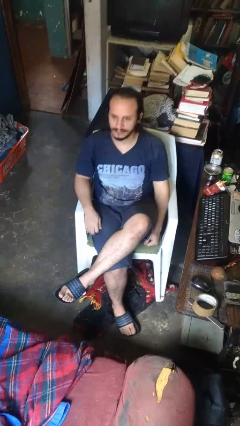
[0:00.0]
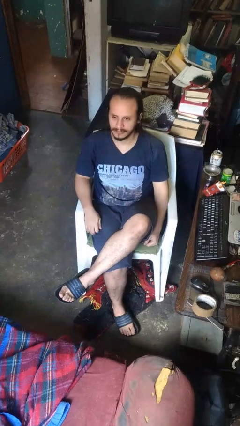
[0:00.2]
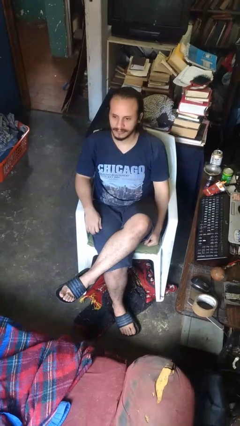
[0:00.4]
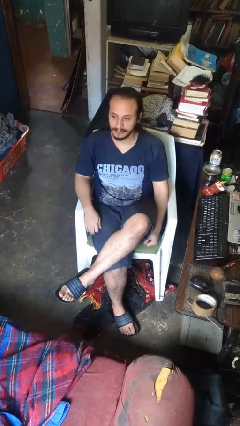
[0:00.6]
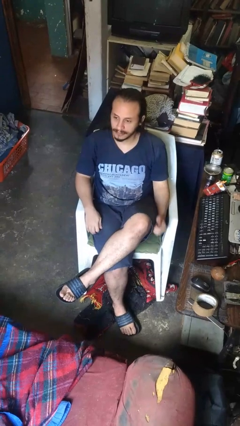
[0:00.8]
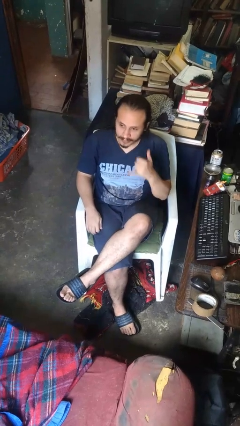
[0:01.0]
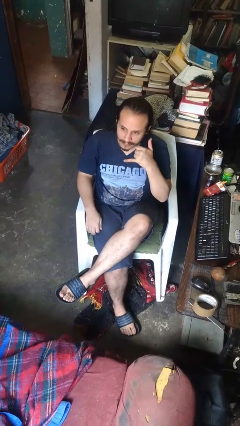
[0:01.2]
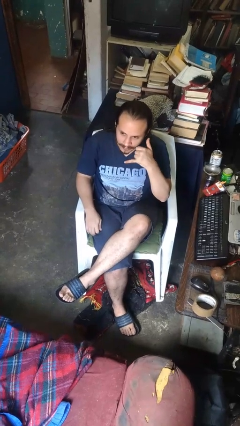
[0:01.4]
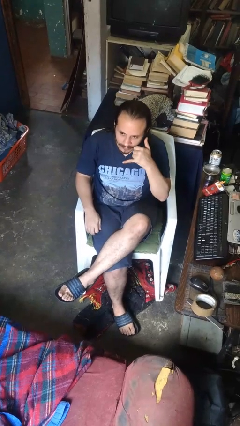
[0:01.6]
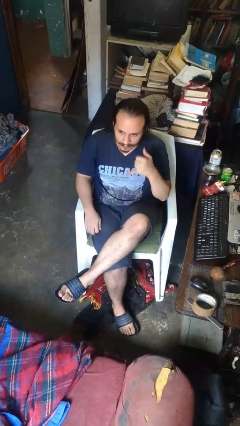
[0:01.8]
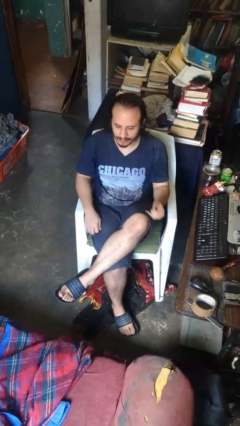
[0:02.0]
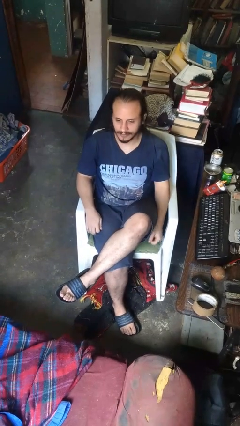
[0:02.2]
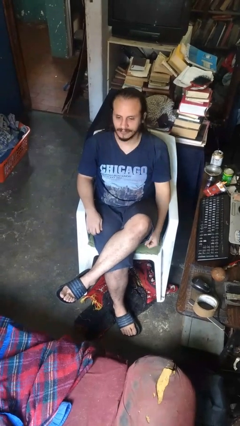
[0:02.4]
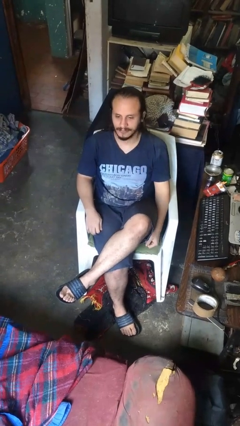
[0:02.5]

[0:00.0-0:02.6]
person gestures call me

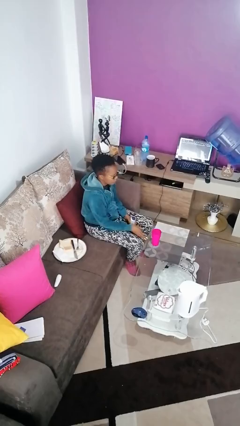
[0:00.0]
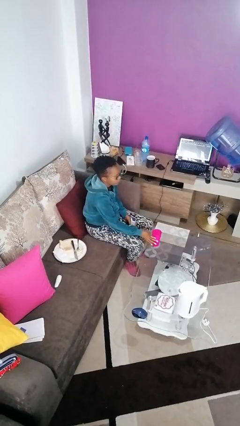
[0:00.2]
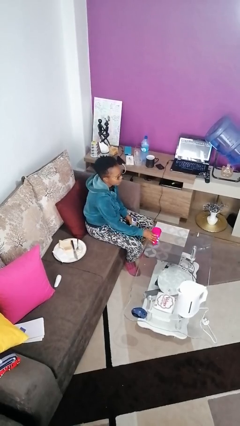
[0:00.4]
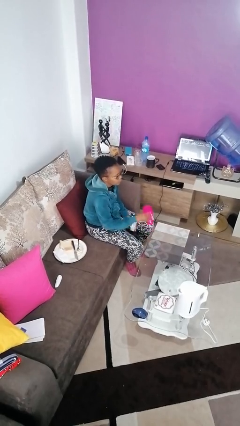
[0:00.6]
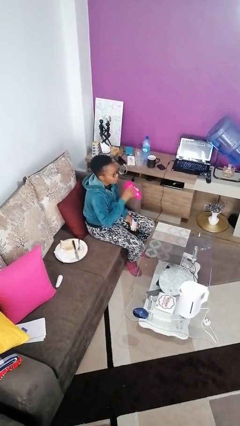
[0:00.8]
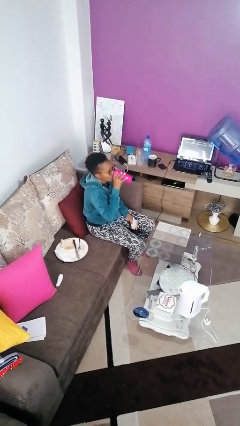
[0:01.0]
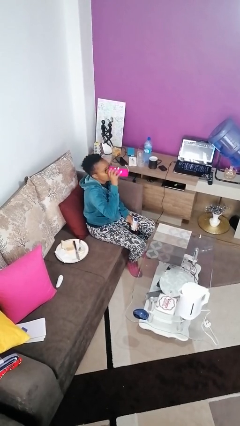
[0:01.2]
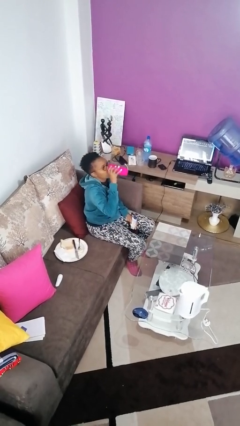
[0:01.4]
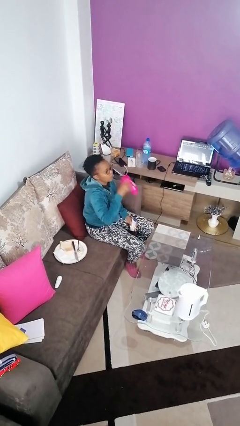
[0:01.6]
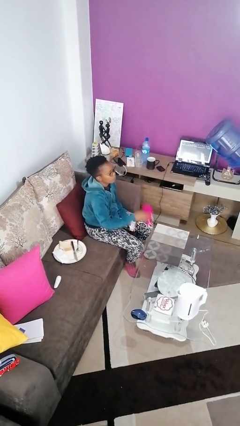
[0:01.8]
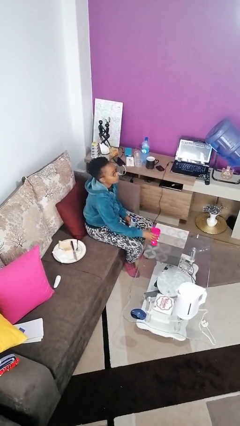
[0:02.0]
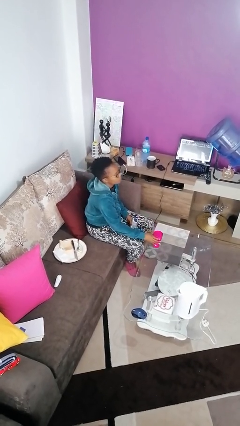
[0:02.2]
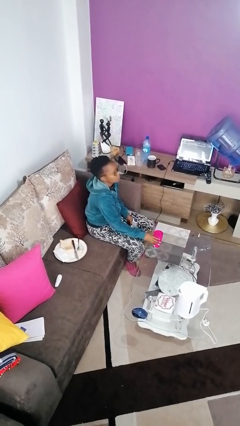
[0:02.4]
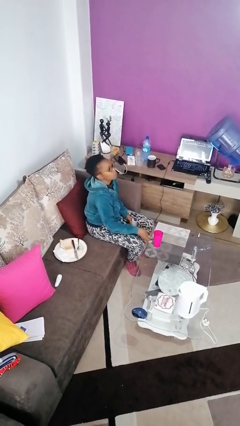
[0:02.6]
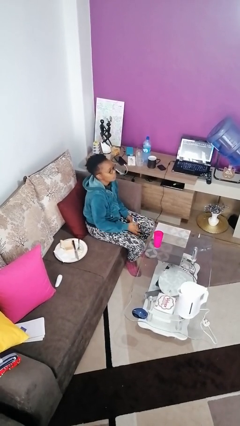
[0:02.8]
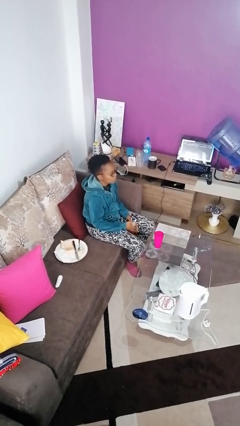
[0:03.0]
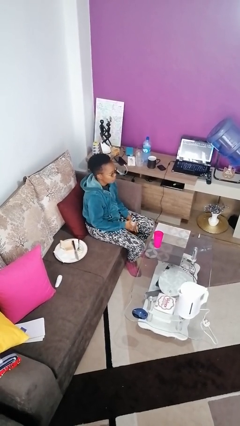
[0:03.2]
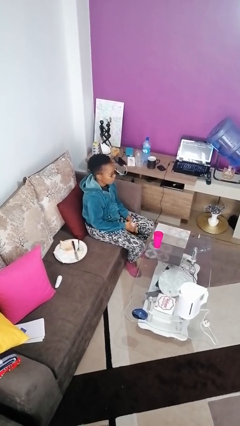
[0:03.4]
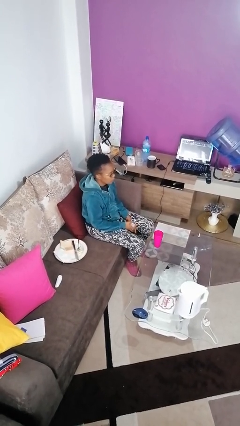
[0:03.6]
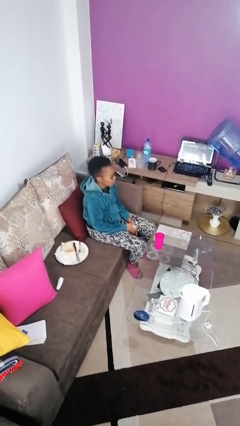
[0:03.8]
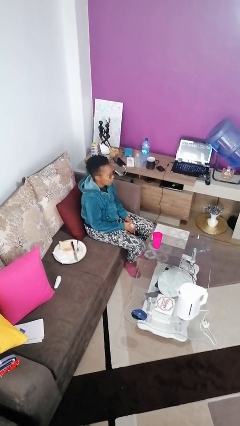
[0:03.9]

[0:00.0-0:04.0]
person drinks from cup

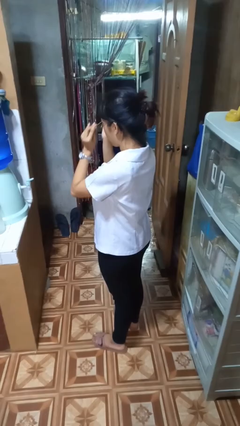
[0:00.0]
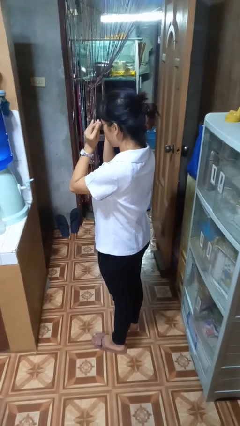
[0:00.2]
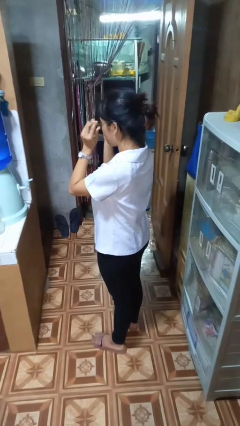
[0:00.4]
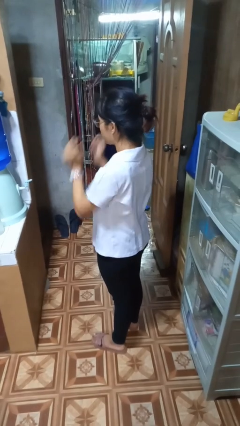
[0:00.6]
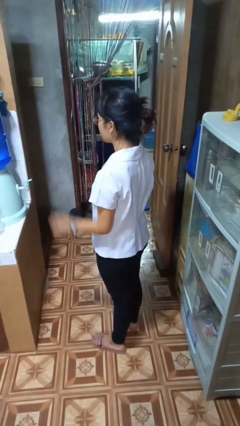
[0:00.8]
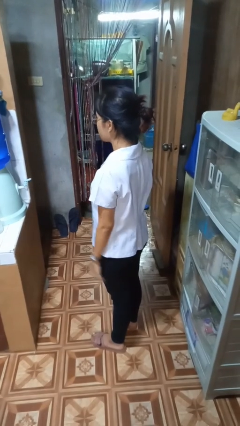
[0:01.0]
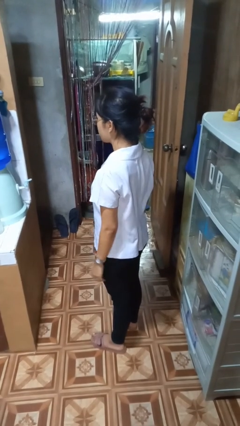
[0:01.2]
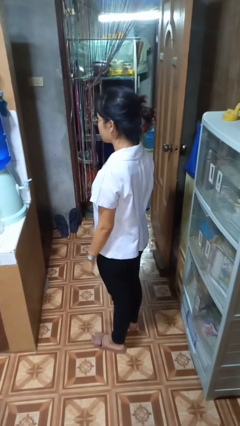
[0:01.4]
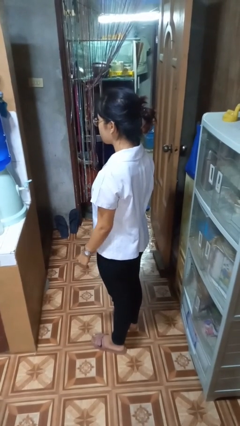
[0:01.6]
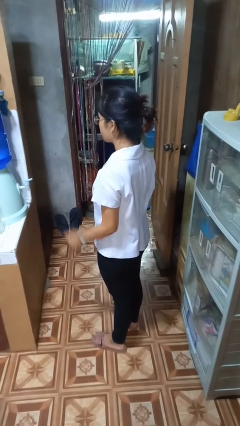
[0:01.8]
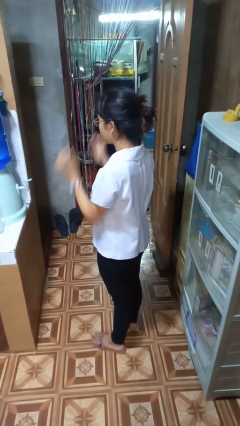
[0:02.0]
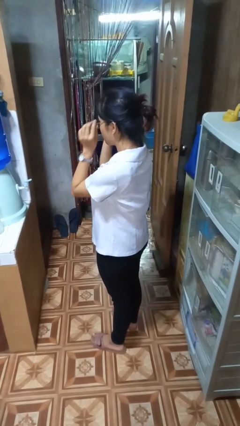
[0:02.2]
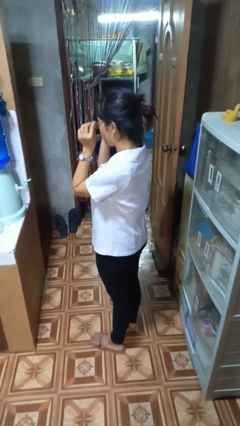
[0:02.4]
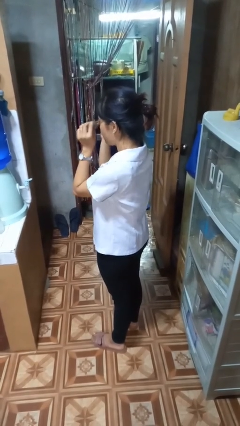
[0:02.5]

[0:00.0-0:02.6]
person puts on glasses

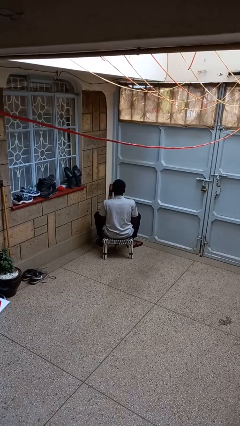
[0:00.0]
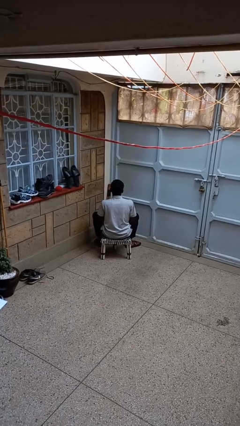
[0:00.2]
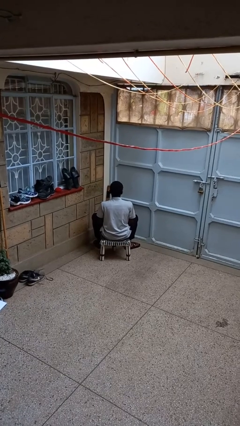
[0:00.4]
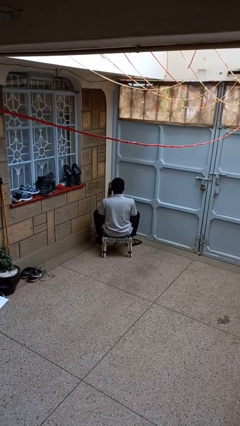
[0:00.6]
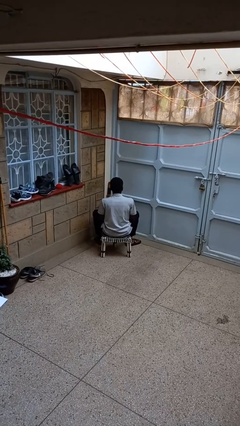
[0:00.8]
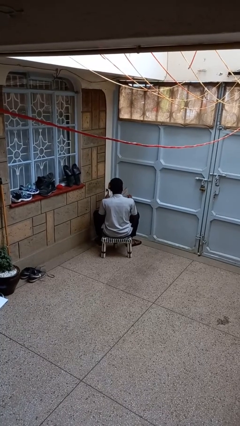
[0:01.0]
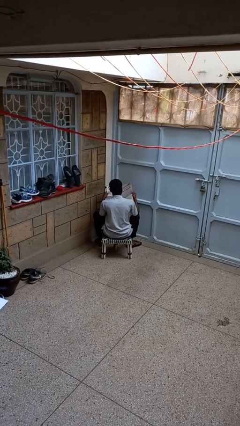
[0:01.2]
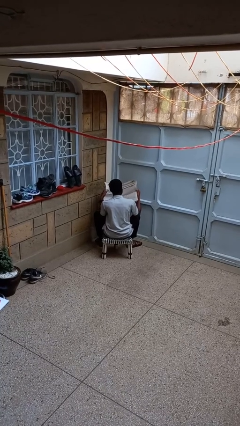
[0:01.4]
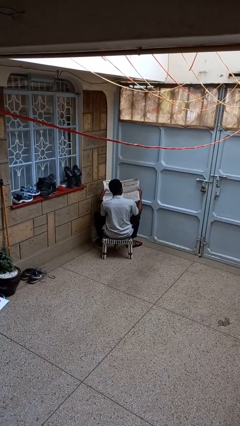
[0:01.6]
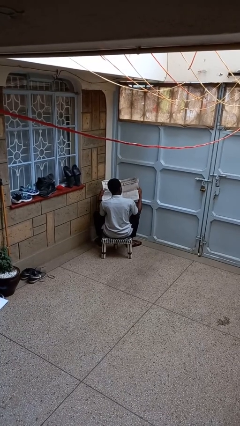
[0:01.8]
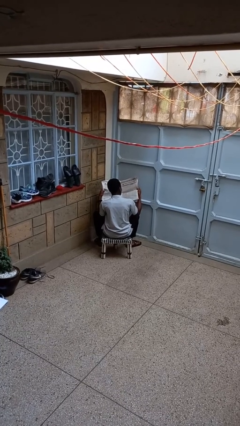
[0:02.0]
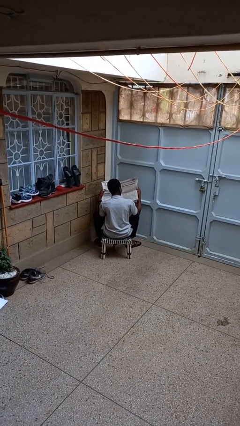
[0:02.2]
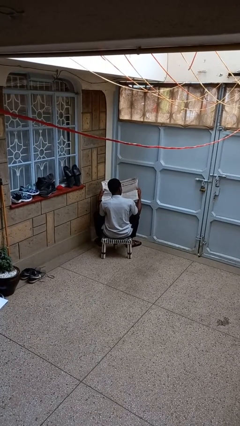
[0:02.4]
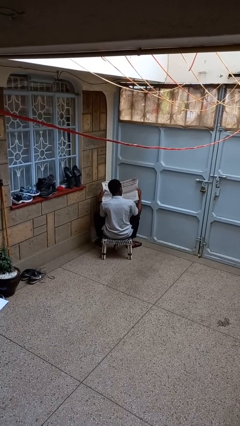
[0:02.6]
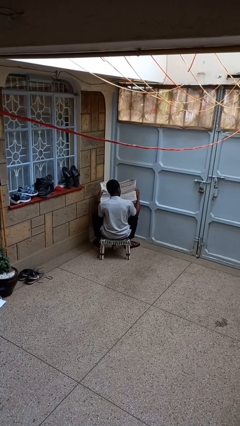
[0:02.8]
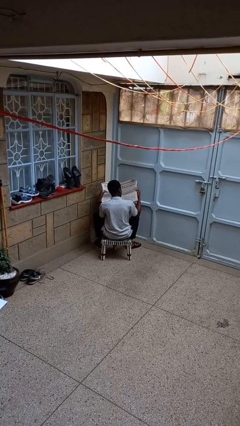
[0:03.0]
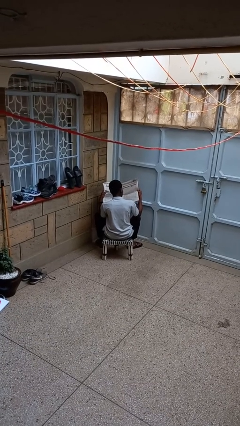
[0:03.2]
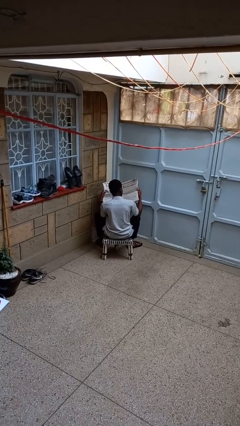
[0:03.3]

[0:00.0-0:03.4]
person reads newspaper

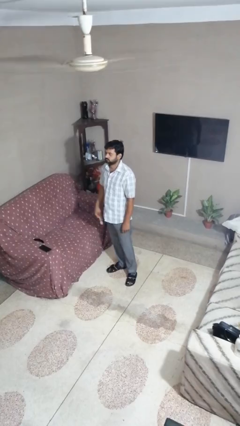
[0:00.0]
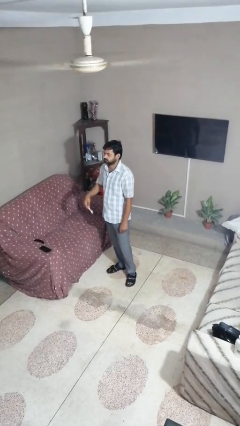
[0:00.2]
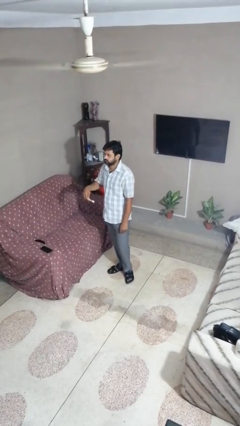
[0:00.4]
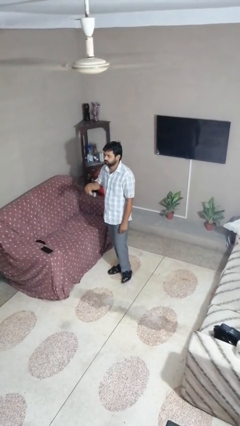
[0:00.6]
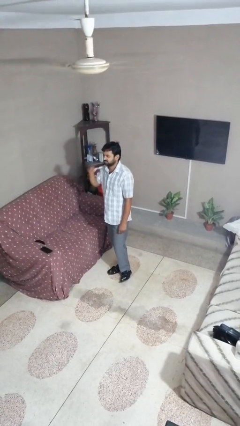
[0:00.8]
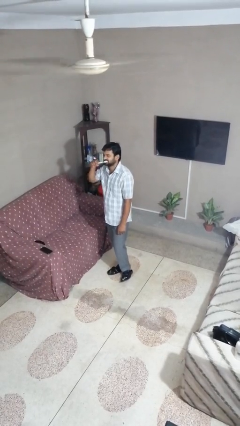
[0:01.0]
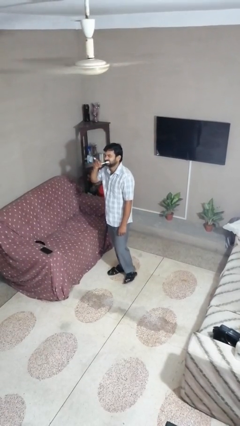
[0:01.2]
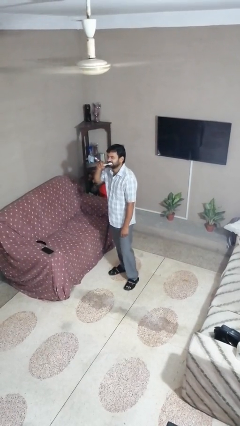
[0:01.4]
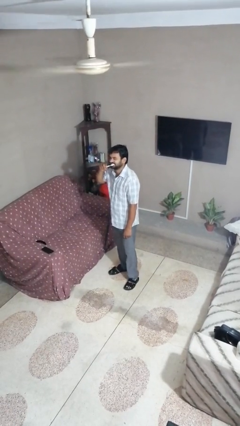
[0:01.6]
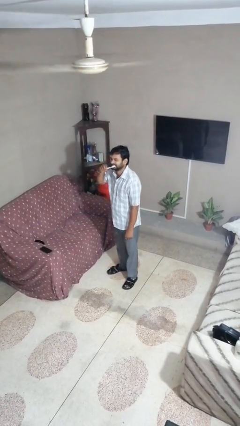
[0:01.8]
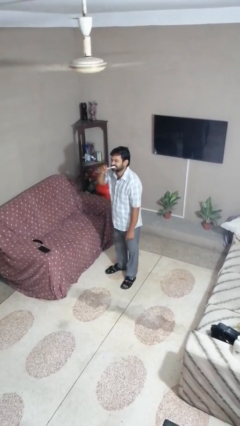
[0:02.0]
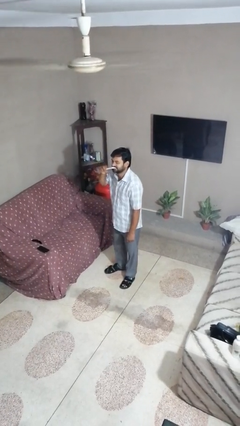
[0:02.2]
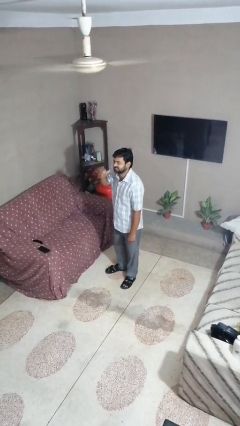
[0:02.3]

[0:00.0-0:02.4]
person brushes teeth

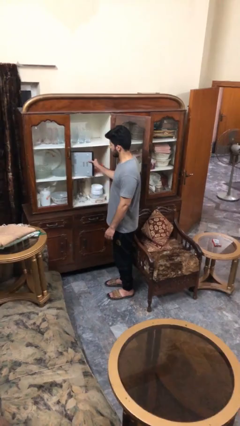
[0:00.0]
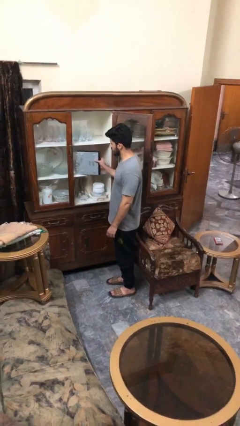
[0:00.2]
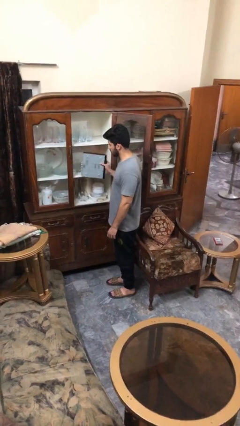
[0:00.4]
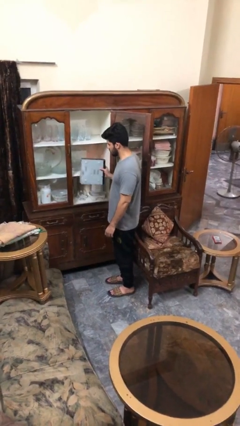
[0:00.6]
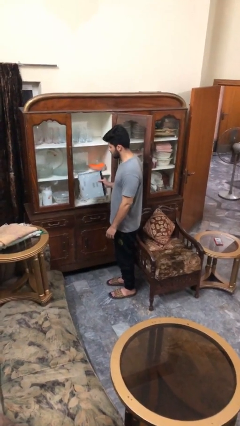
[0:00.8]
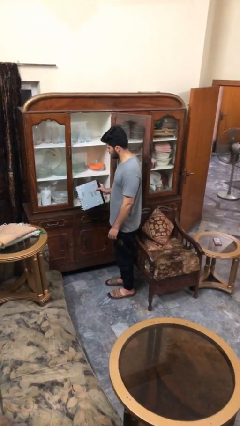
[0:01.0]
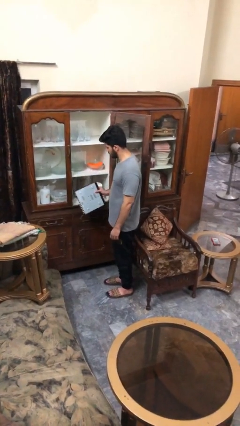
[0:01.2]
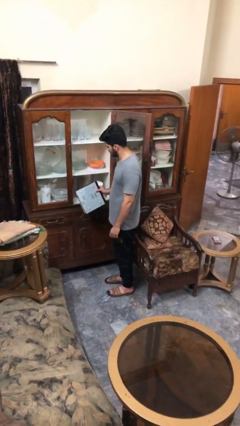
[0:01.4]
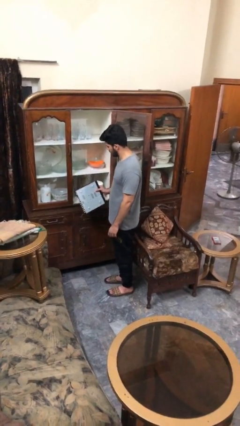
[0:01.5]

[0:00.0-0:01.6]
person picks up object from cabinet
